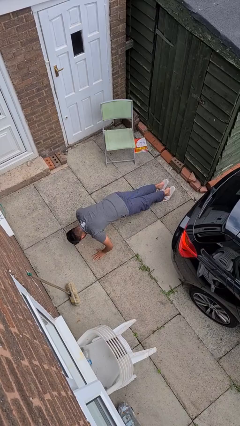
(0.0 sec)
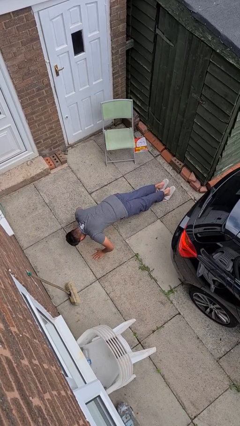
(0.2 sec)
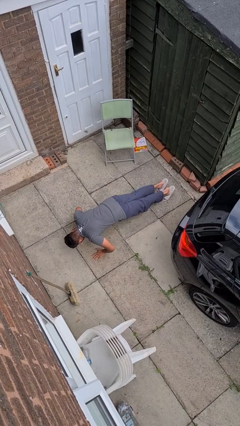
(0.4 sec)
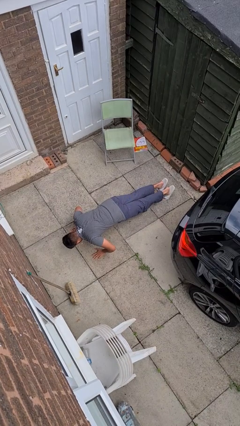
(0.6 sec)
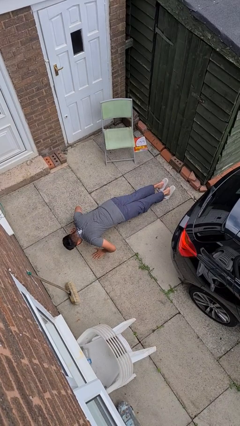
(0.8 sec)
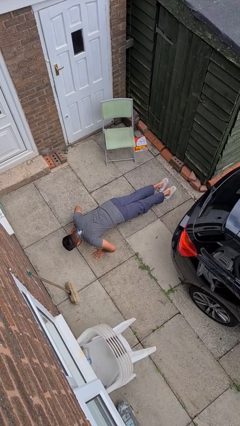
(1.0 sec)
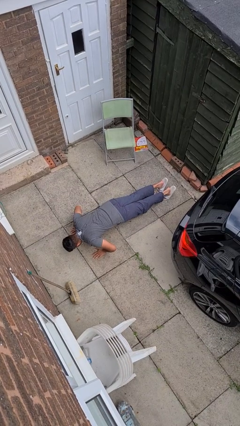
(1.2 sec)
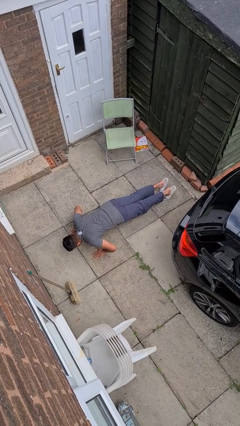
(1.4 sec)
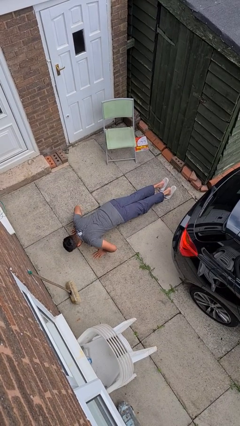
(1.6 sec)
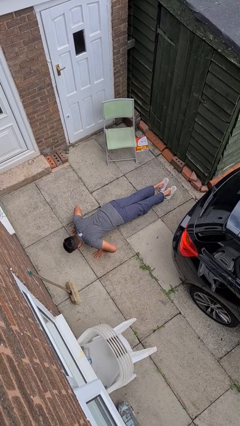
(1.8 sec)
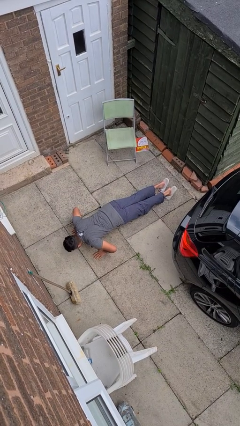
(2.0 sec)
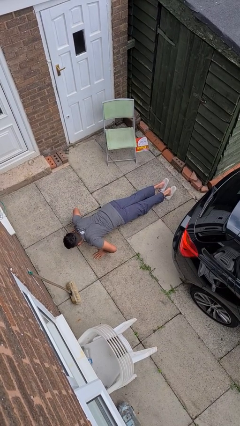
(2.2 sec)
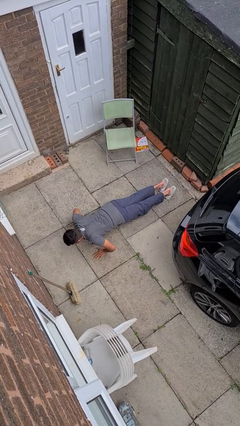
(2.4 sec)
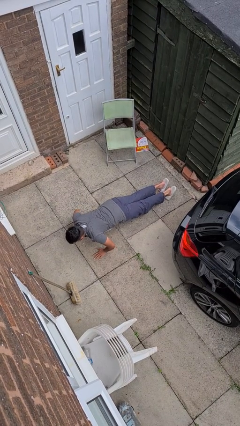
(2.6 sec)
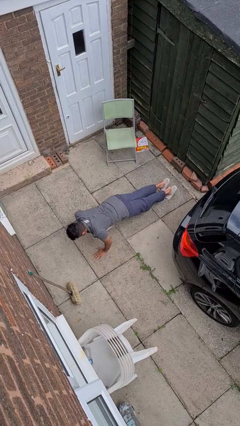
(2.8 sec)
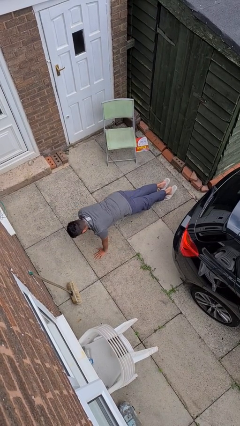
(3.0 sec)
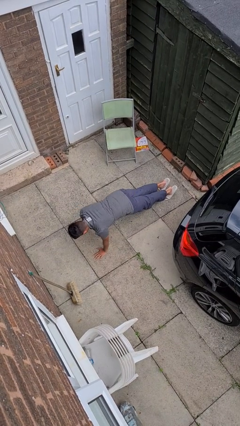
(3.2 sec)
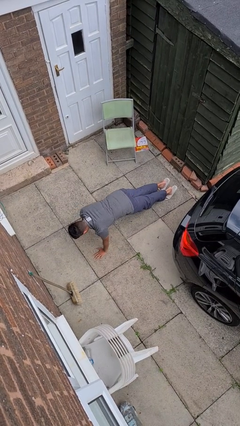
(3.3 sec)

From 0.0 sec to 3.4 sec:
person exercises with pushup

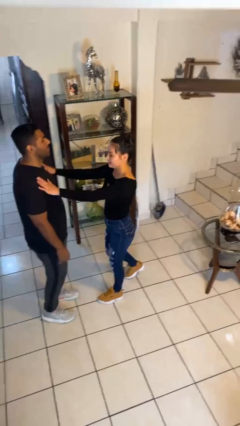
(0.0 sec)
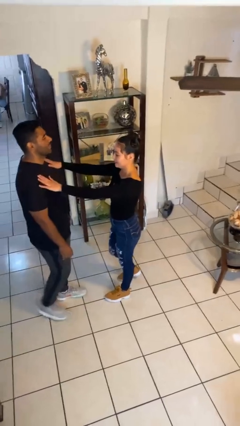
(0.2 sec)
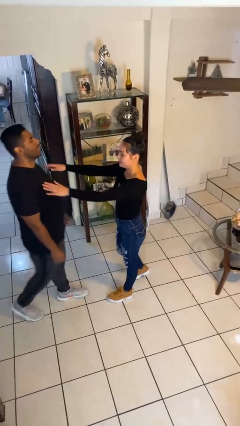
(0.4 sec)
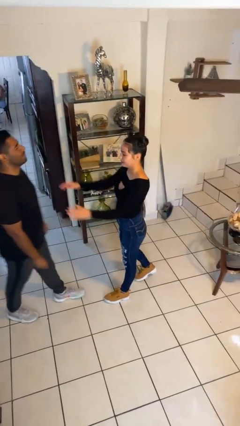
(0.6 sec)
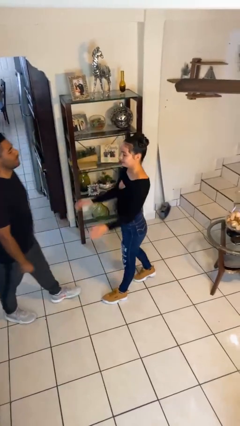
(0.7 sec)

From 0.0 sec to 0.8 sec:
person shoves person

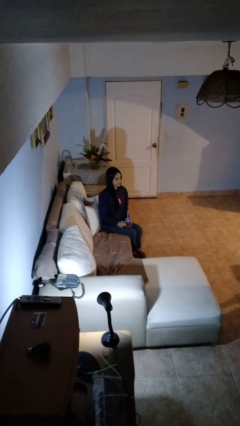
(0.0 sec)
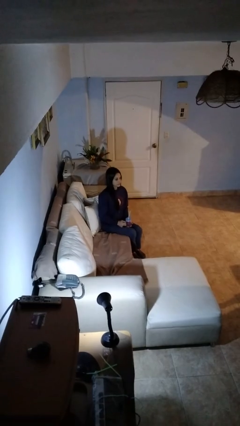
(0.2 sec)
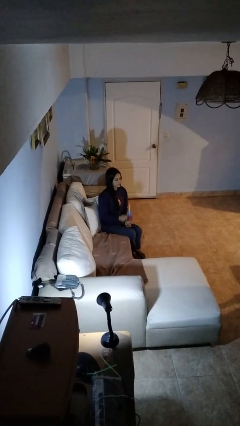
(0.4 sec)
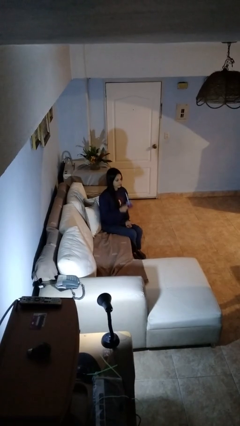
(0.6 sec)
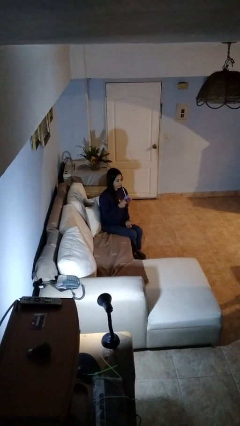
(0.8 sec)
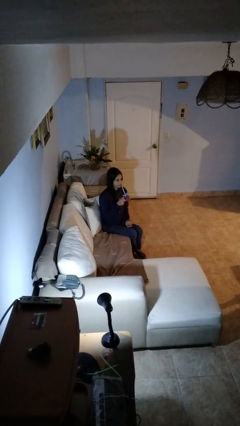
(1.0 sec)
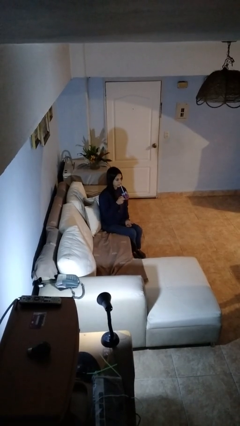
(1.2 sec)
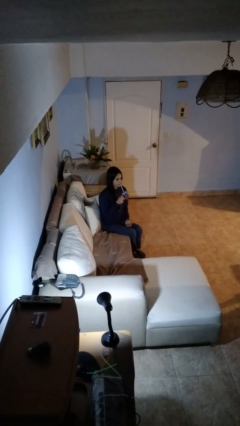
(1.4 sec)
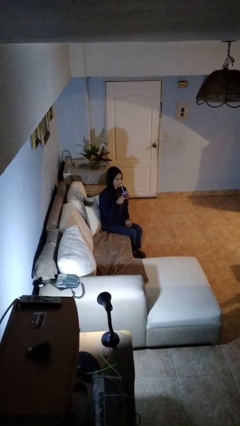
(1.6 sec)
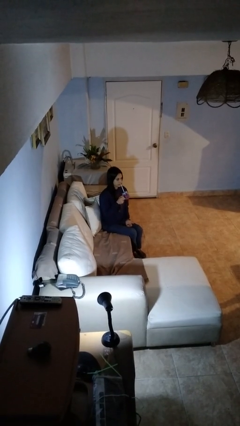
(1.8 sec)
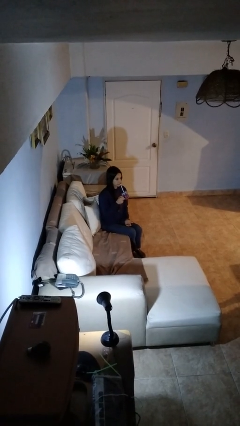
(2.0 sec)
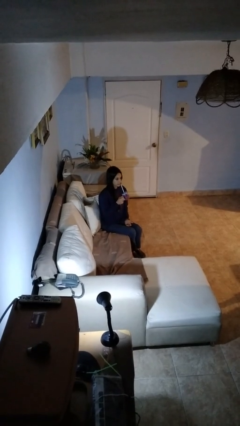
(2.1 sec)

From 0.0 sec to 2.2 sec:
person drinks from straw

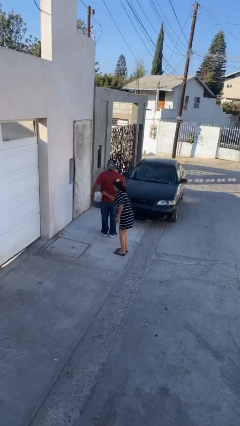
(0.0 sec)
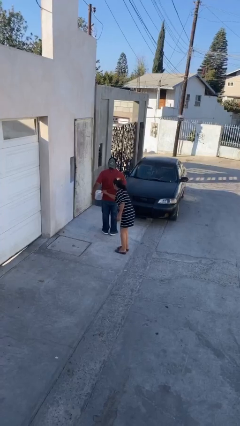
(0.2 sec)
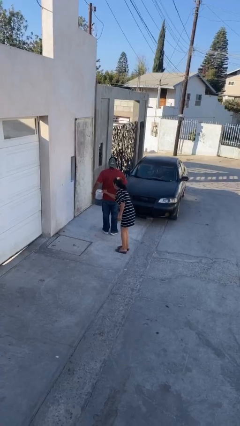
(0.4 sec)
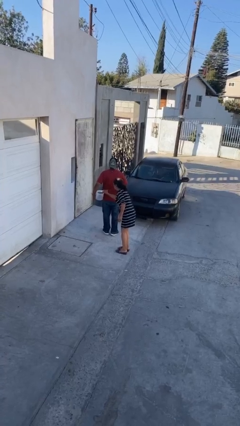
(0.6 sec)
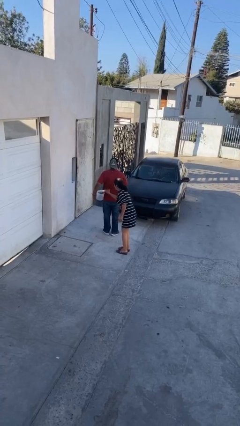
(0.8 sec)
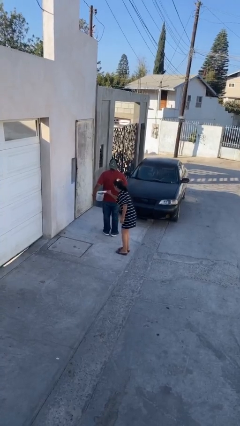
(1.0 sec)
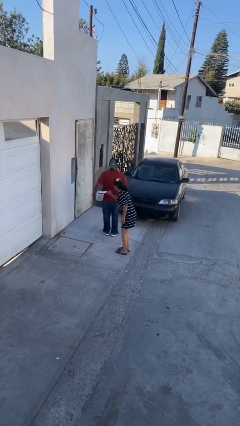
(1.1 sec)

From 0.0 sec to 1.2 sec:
person steals object from person

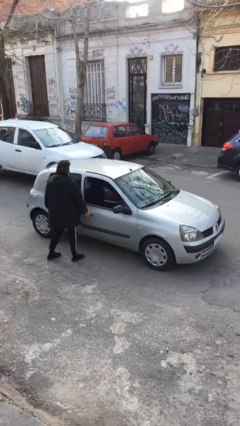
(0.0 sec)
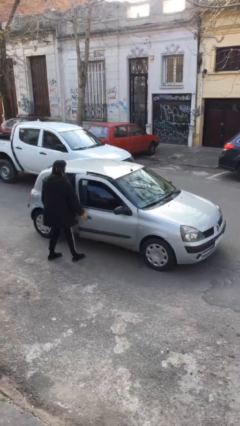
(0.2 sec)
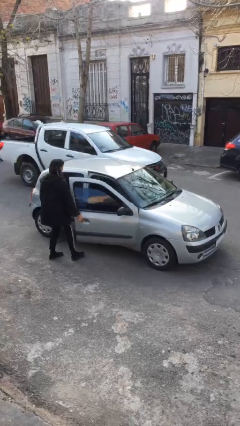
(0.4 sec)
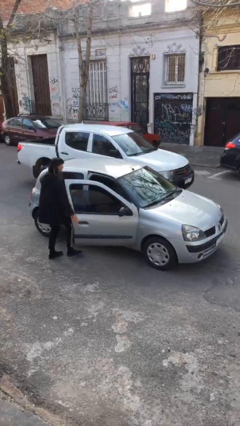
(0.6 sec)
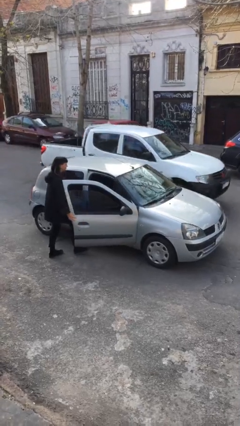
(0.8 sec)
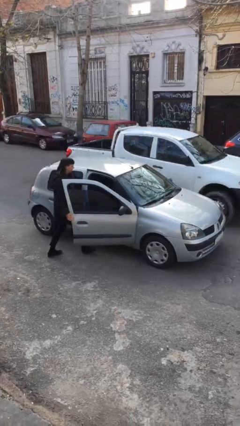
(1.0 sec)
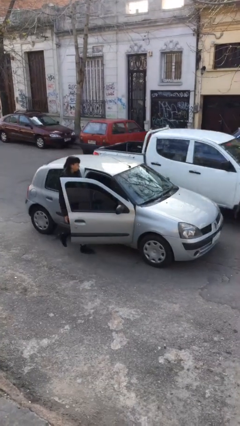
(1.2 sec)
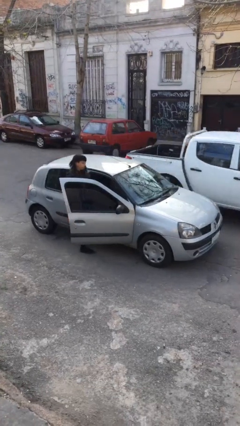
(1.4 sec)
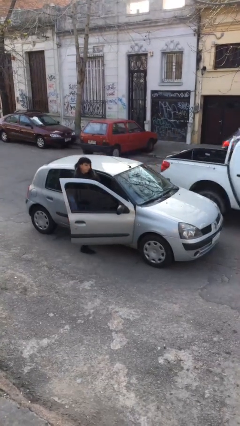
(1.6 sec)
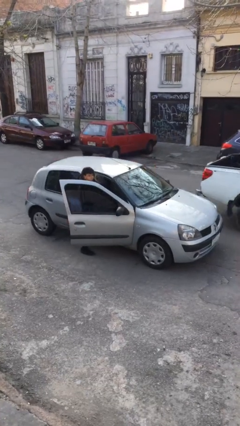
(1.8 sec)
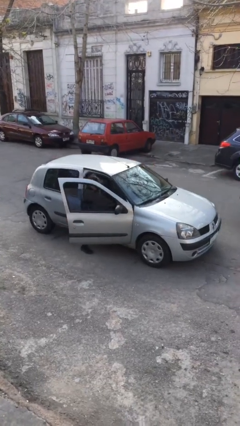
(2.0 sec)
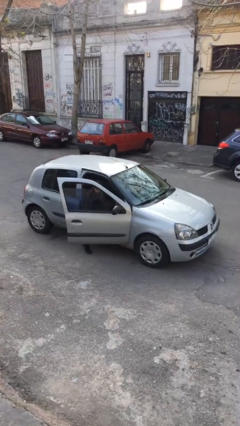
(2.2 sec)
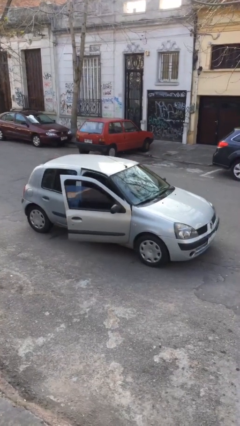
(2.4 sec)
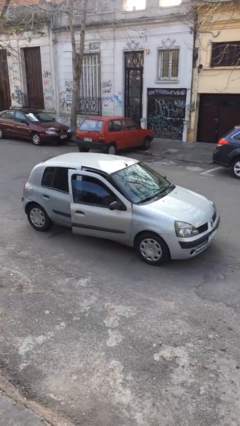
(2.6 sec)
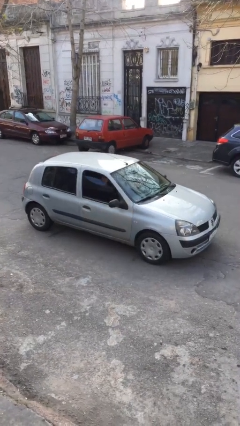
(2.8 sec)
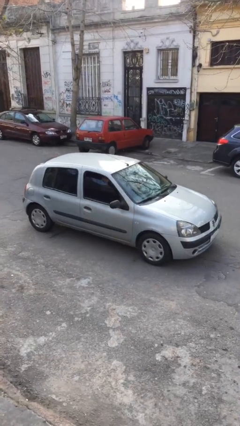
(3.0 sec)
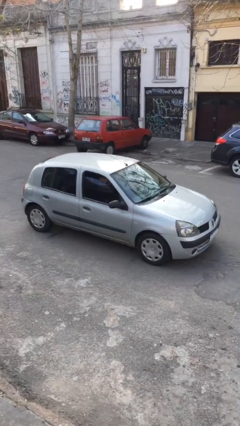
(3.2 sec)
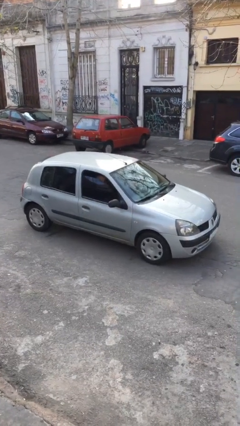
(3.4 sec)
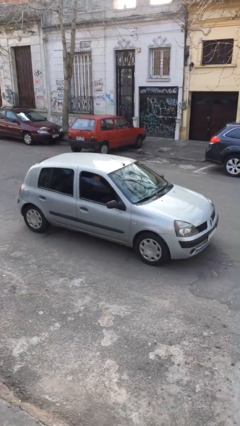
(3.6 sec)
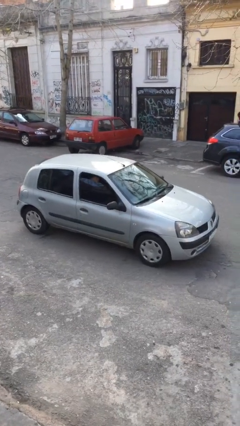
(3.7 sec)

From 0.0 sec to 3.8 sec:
car picks up person

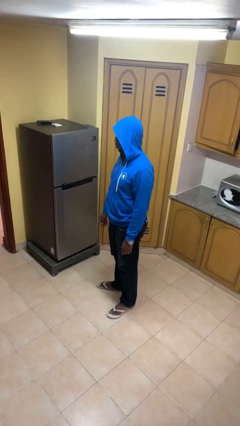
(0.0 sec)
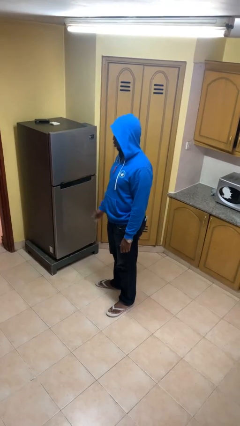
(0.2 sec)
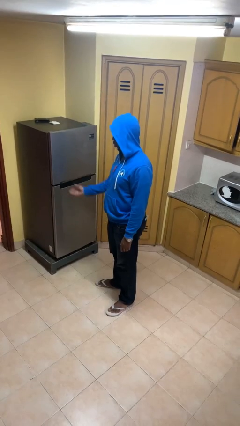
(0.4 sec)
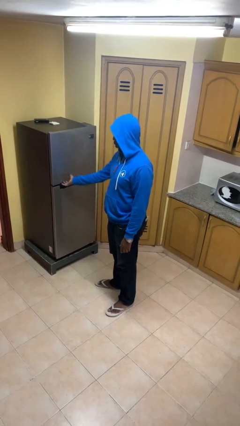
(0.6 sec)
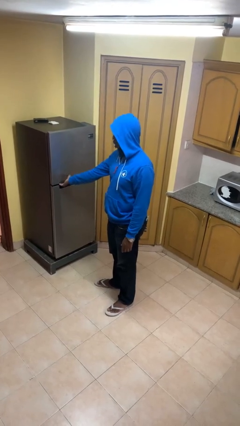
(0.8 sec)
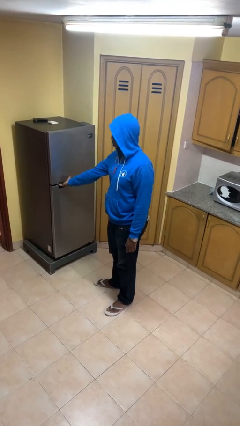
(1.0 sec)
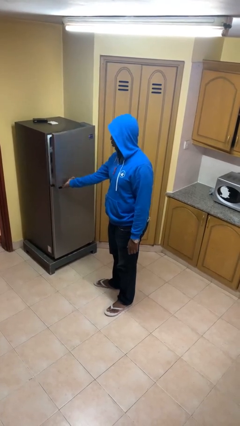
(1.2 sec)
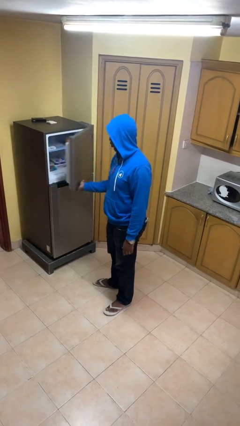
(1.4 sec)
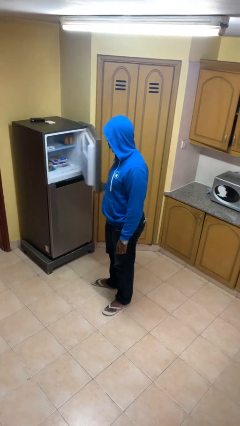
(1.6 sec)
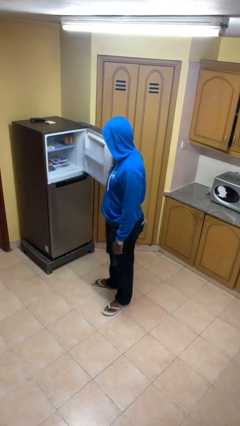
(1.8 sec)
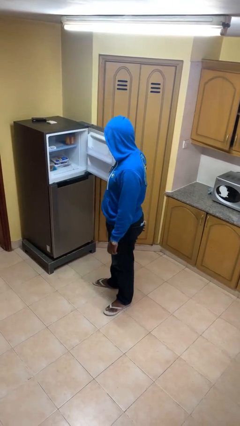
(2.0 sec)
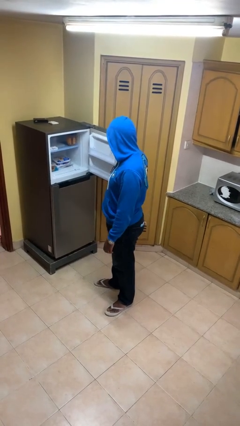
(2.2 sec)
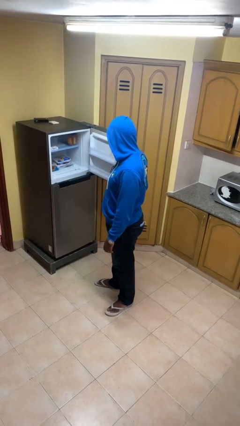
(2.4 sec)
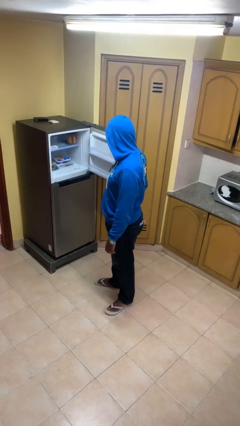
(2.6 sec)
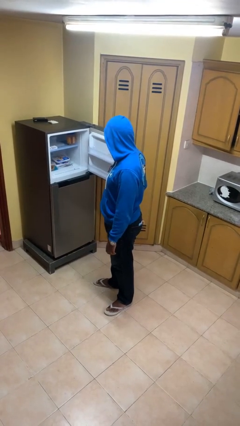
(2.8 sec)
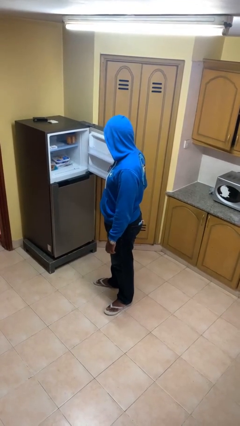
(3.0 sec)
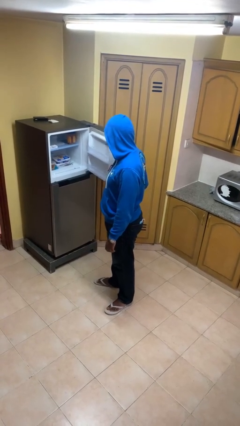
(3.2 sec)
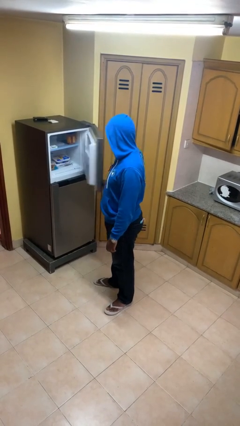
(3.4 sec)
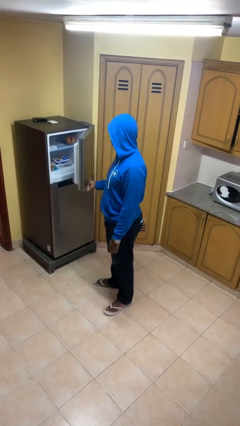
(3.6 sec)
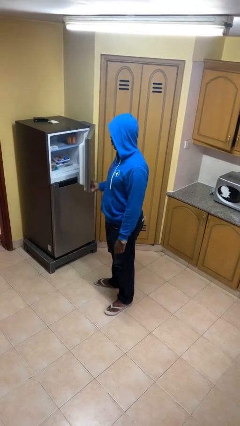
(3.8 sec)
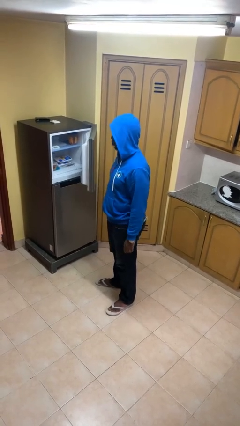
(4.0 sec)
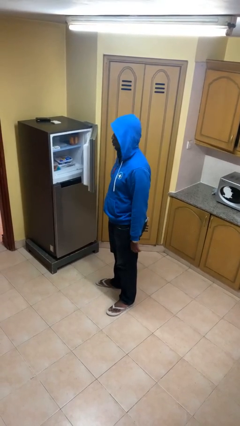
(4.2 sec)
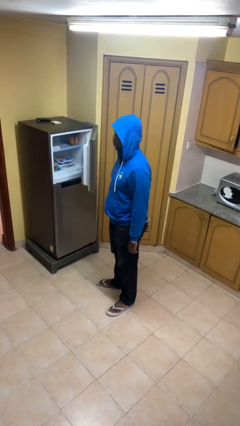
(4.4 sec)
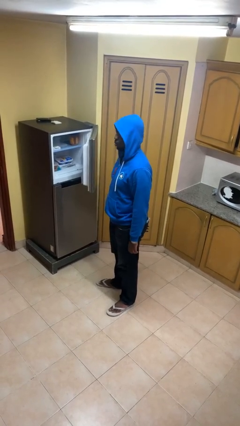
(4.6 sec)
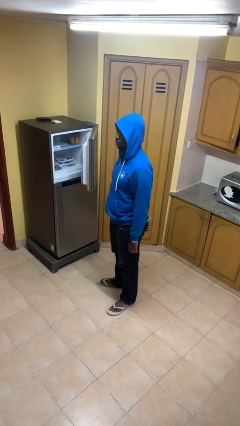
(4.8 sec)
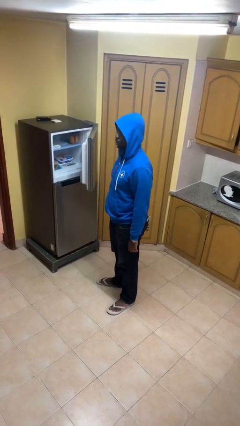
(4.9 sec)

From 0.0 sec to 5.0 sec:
person opens refrigerator

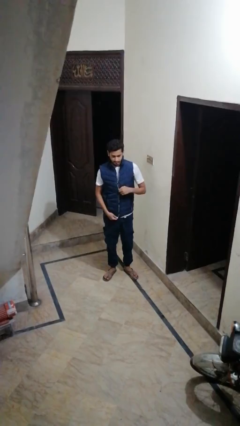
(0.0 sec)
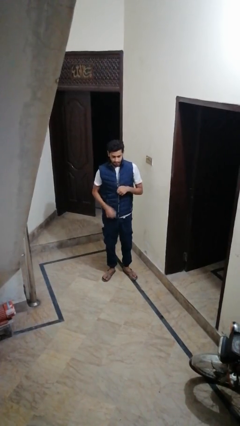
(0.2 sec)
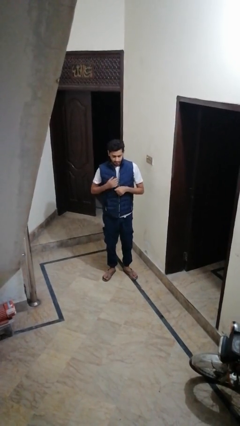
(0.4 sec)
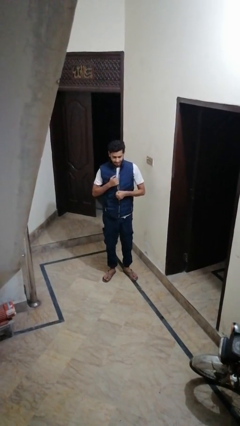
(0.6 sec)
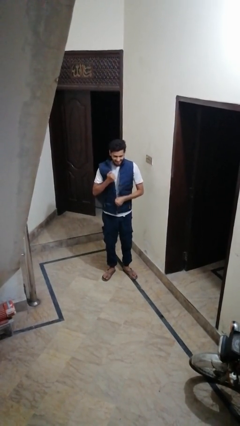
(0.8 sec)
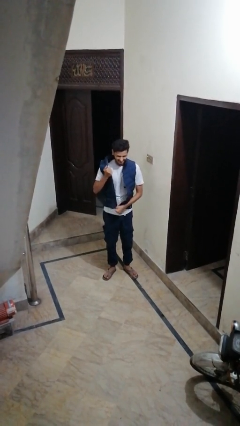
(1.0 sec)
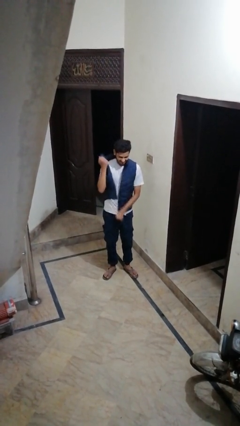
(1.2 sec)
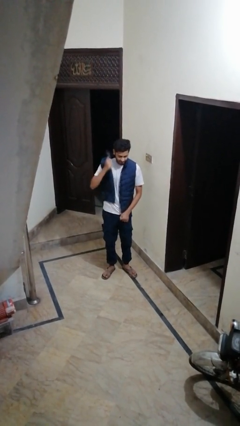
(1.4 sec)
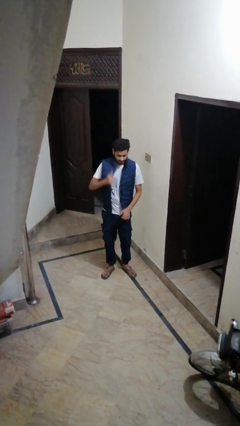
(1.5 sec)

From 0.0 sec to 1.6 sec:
person unzips jacket
